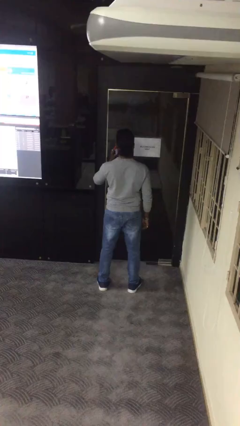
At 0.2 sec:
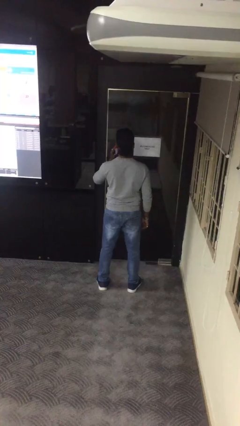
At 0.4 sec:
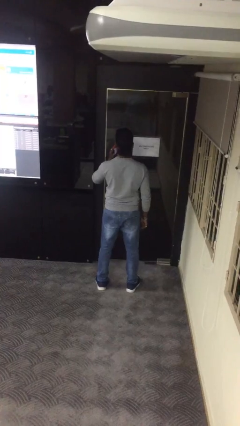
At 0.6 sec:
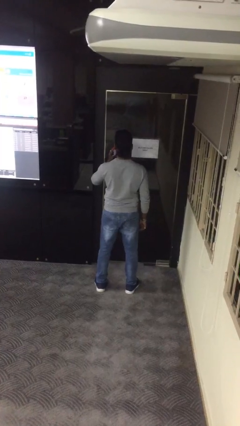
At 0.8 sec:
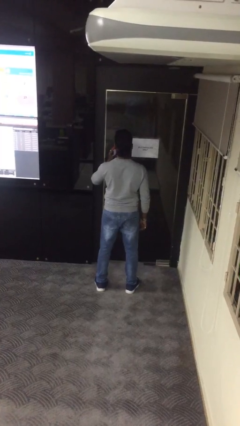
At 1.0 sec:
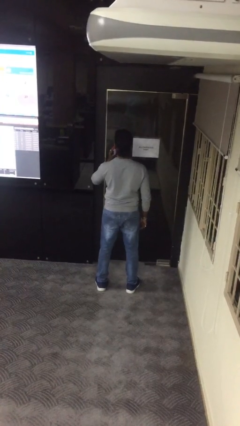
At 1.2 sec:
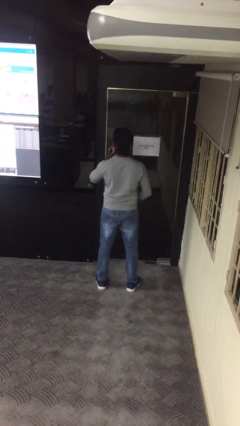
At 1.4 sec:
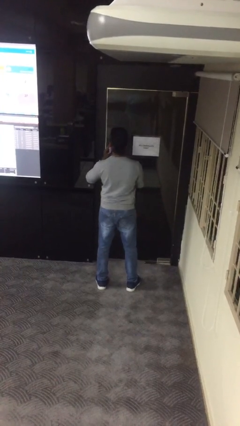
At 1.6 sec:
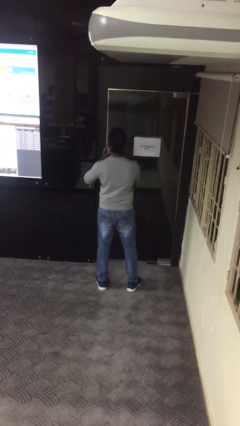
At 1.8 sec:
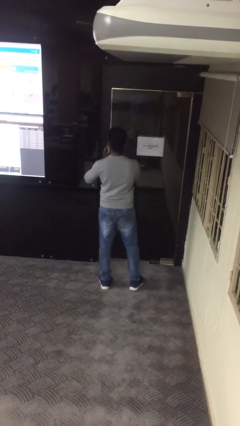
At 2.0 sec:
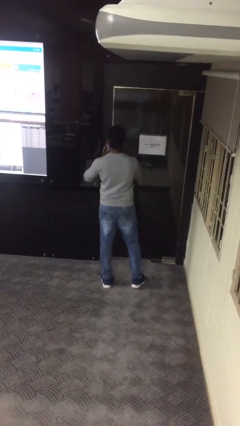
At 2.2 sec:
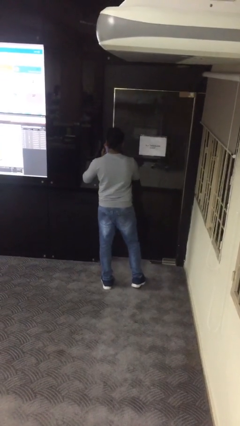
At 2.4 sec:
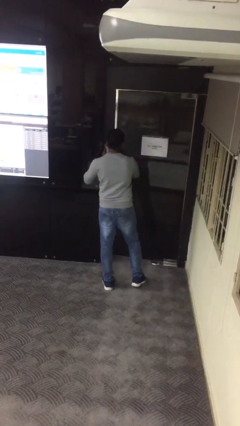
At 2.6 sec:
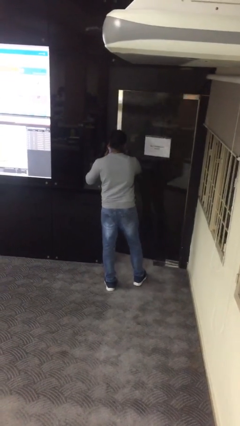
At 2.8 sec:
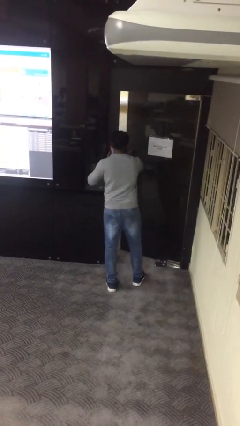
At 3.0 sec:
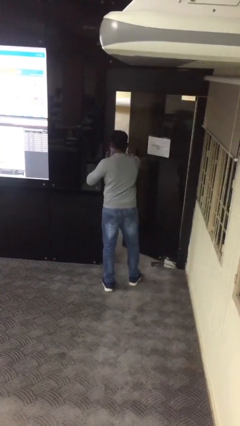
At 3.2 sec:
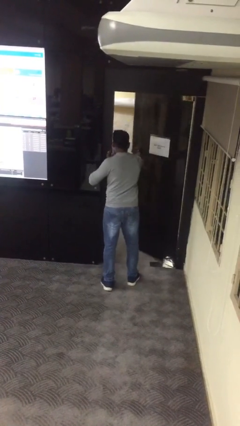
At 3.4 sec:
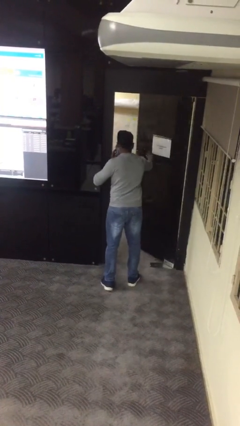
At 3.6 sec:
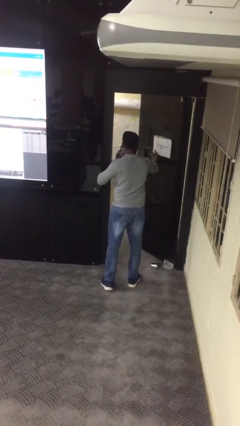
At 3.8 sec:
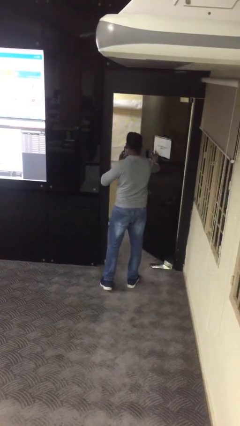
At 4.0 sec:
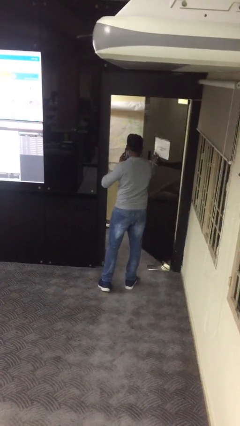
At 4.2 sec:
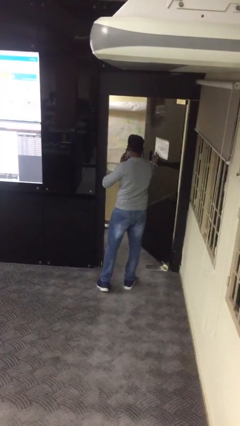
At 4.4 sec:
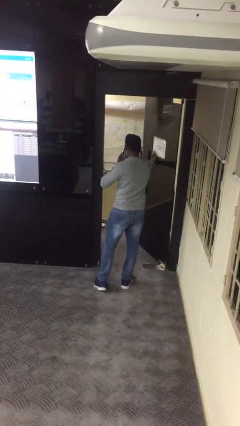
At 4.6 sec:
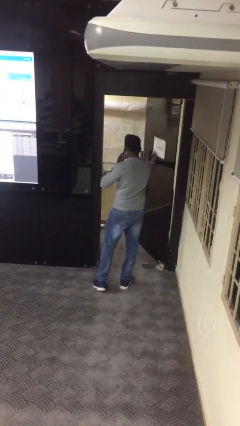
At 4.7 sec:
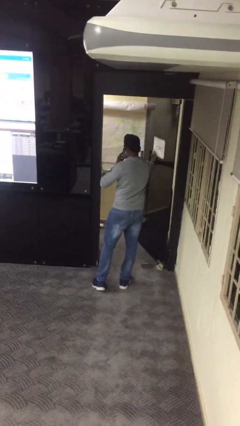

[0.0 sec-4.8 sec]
person opens facility door

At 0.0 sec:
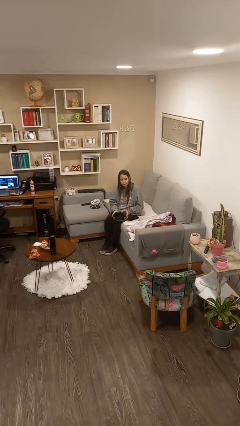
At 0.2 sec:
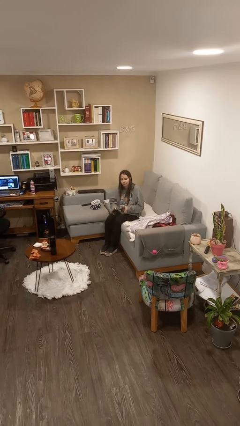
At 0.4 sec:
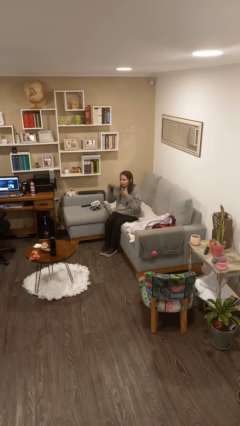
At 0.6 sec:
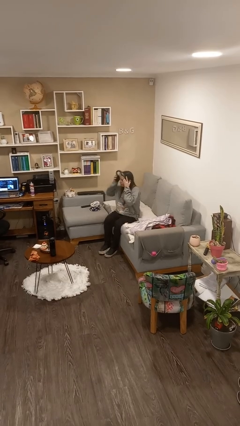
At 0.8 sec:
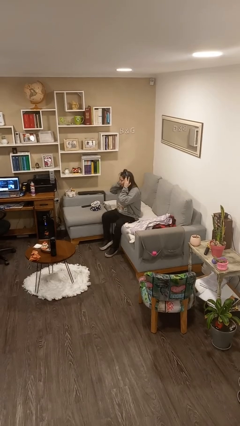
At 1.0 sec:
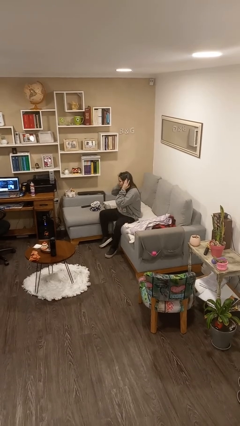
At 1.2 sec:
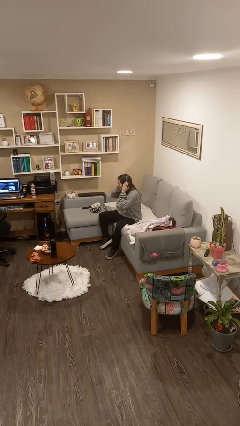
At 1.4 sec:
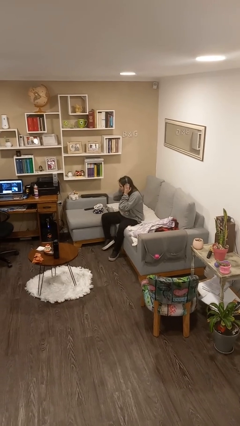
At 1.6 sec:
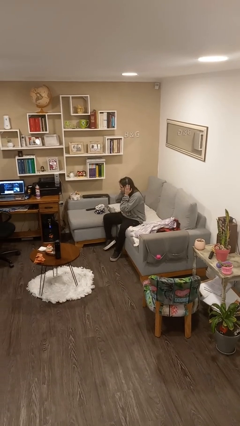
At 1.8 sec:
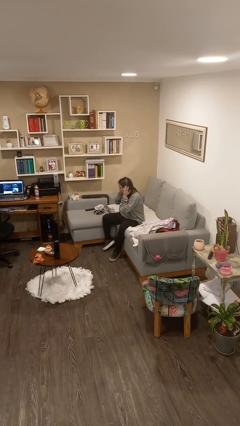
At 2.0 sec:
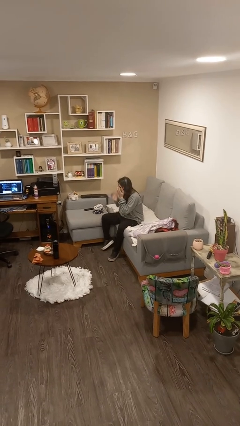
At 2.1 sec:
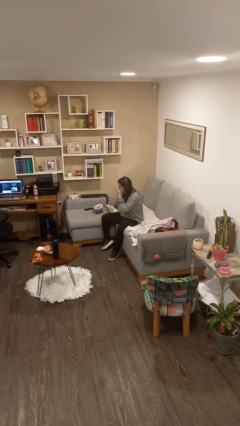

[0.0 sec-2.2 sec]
person puts on headphones

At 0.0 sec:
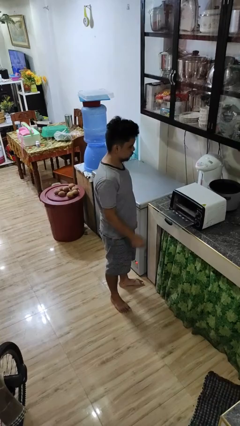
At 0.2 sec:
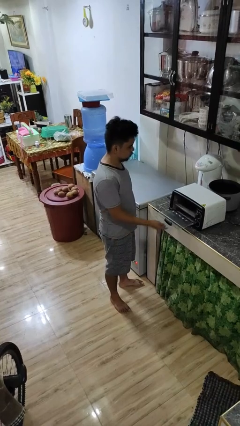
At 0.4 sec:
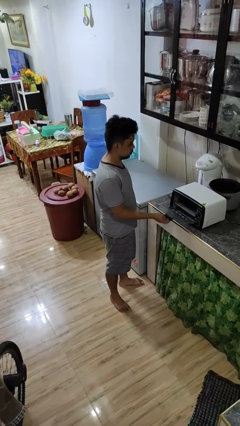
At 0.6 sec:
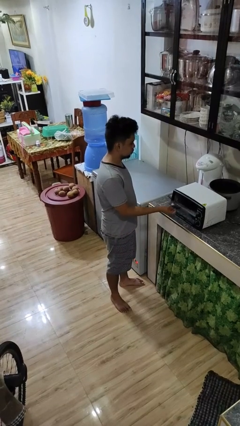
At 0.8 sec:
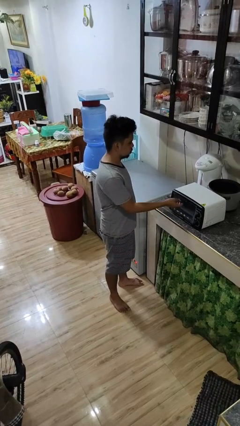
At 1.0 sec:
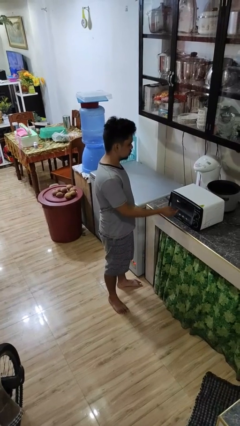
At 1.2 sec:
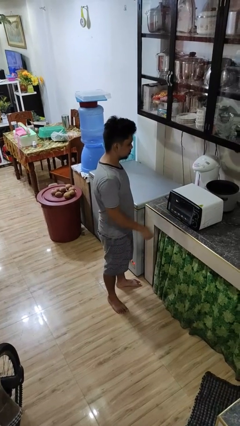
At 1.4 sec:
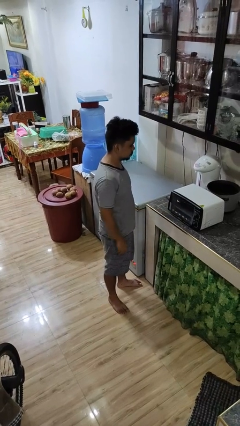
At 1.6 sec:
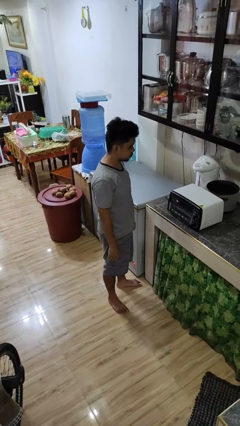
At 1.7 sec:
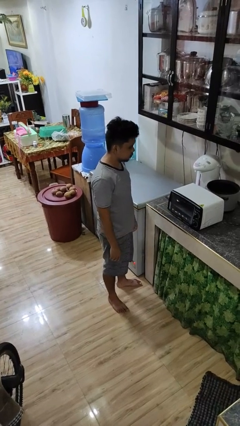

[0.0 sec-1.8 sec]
person closes microwave

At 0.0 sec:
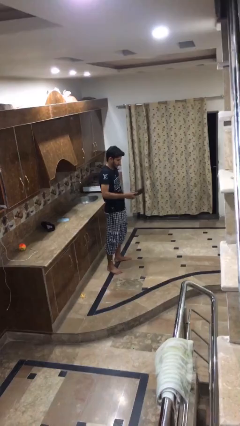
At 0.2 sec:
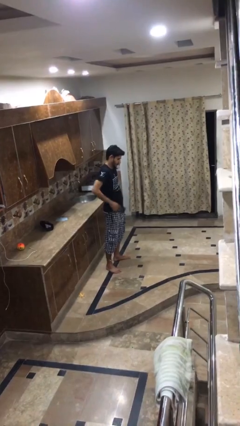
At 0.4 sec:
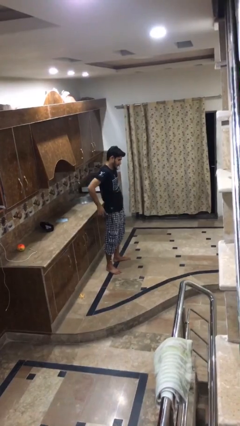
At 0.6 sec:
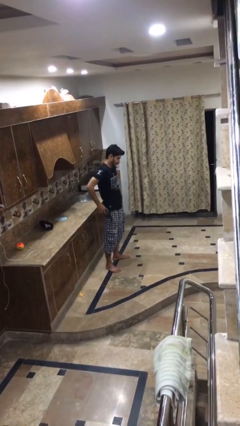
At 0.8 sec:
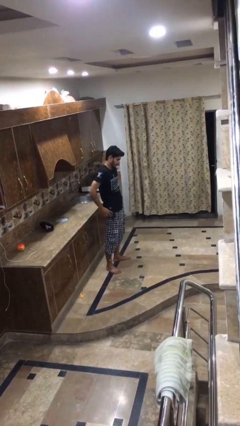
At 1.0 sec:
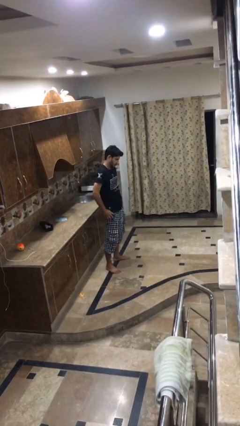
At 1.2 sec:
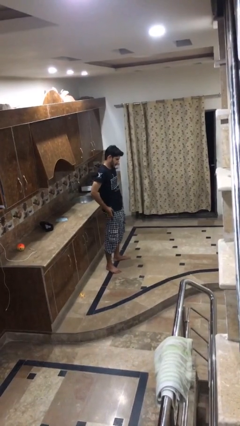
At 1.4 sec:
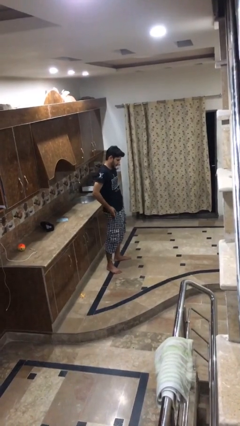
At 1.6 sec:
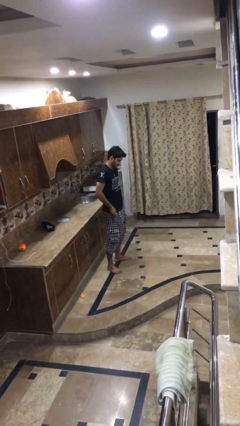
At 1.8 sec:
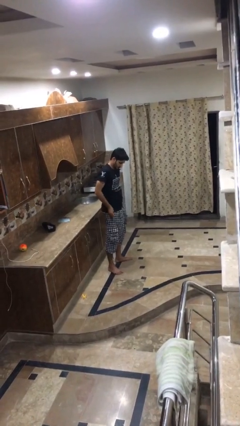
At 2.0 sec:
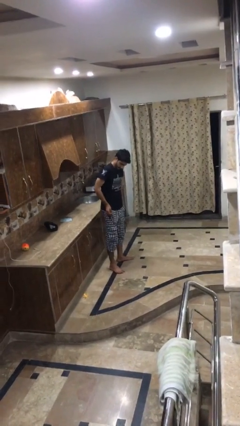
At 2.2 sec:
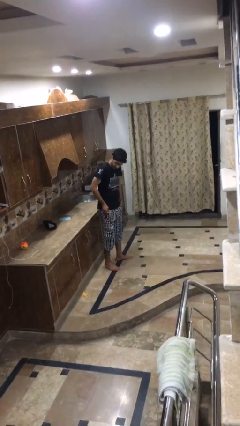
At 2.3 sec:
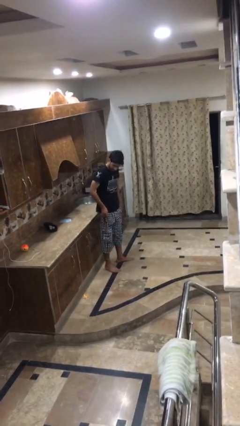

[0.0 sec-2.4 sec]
person puts phone into pocket

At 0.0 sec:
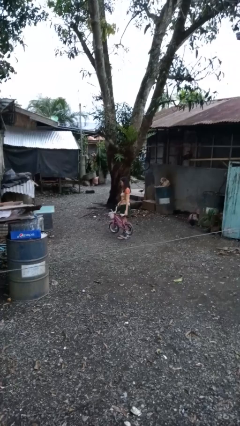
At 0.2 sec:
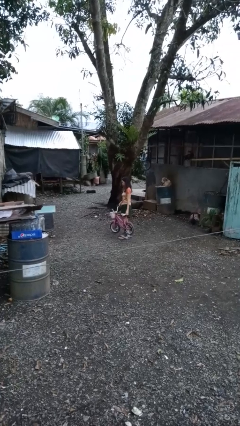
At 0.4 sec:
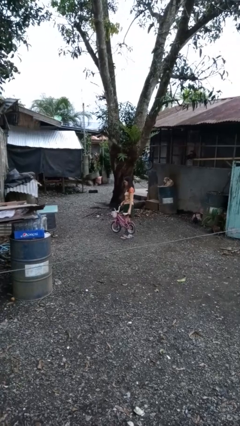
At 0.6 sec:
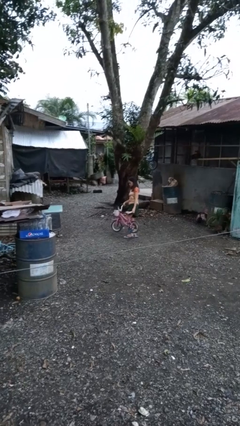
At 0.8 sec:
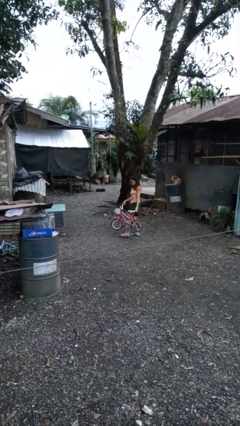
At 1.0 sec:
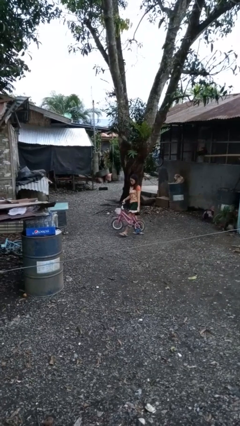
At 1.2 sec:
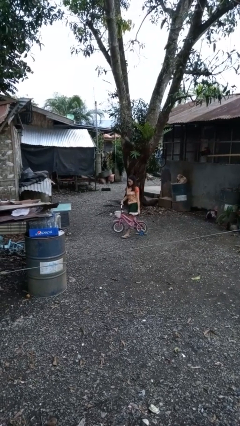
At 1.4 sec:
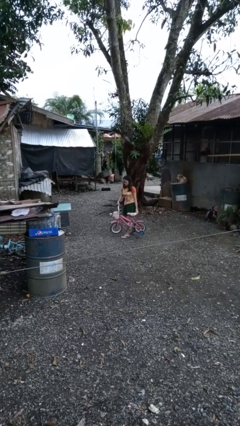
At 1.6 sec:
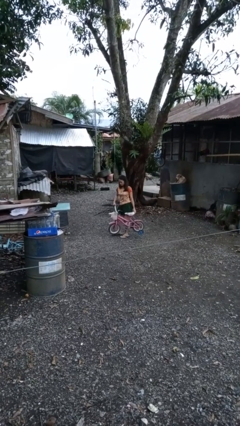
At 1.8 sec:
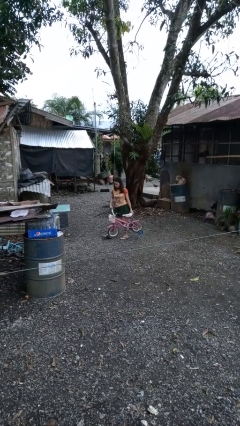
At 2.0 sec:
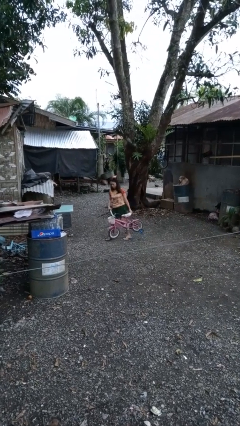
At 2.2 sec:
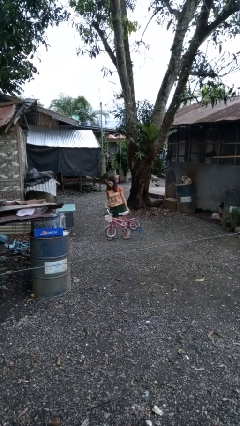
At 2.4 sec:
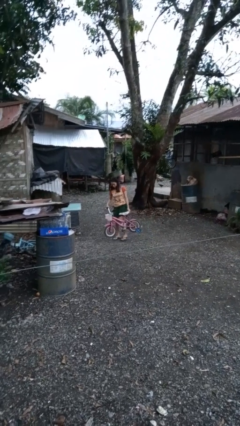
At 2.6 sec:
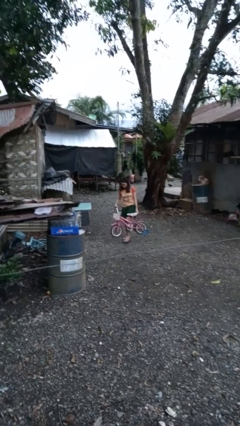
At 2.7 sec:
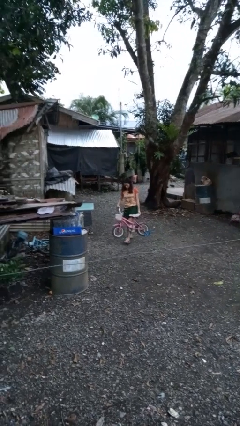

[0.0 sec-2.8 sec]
person carries bicycle

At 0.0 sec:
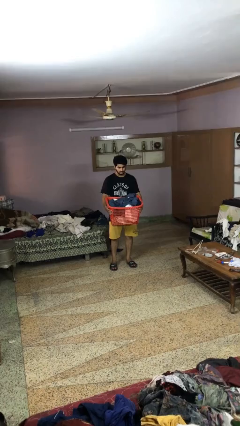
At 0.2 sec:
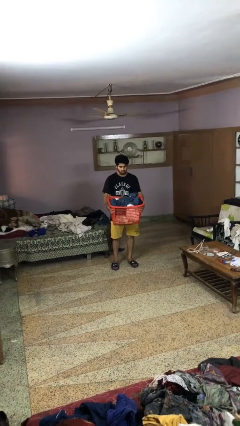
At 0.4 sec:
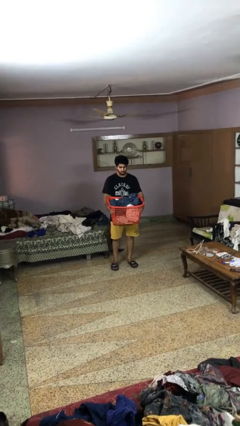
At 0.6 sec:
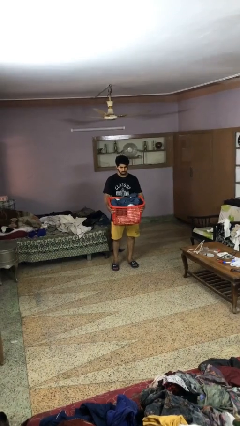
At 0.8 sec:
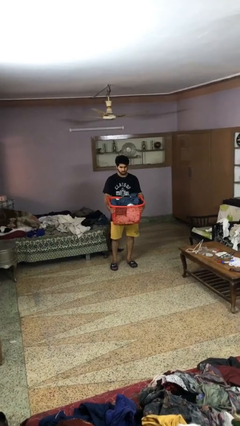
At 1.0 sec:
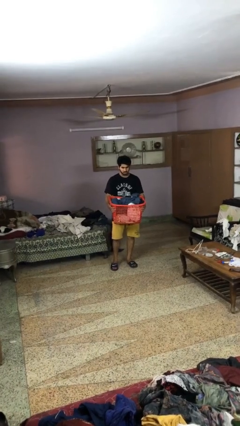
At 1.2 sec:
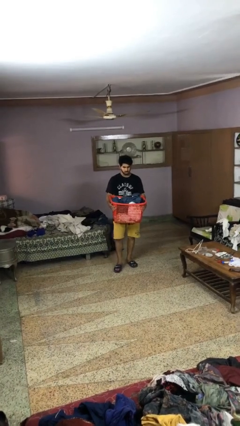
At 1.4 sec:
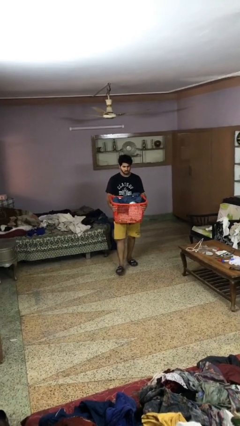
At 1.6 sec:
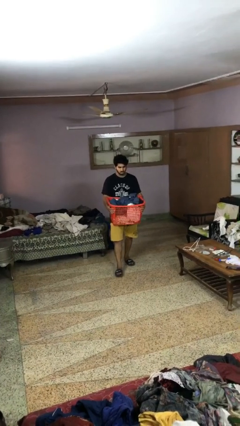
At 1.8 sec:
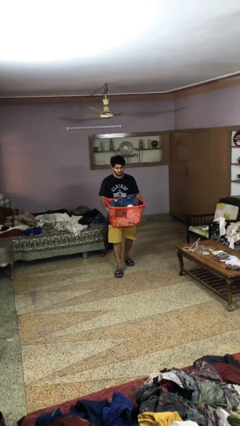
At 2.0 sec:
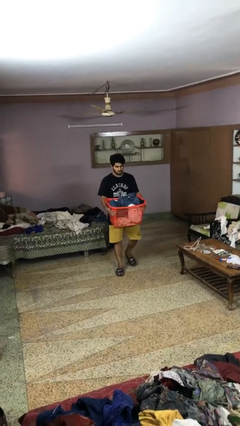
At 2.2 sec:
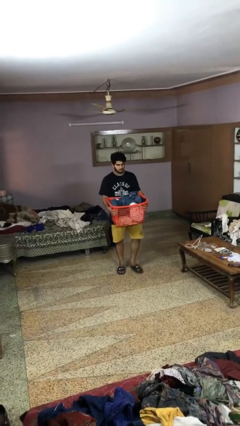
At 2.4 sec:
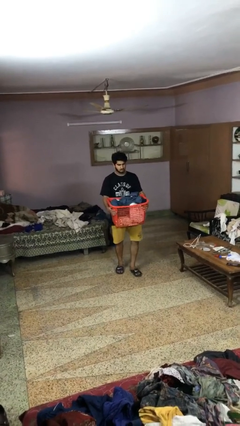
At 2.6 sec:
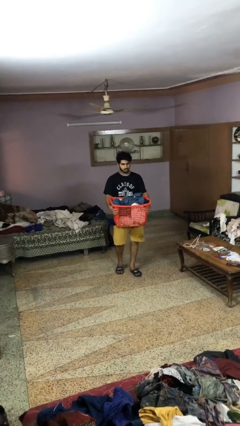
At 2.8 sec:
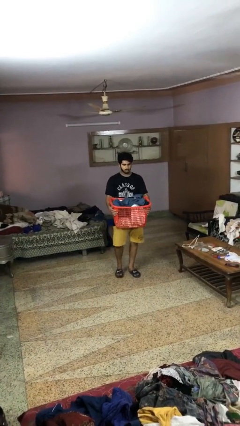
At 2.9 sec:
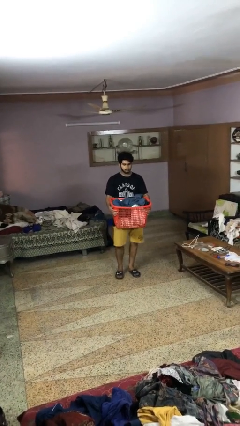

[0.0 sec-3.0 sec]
person carries laundry basket
